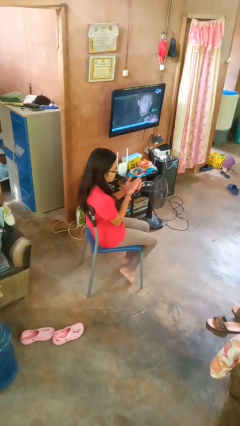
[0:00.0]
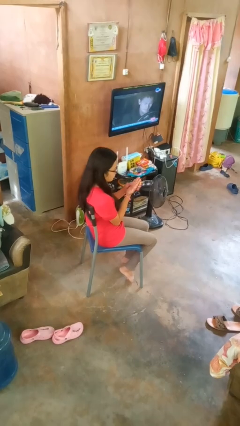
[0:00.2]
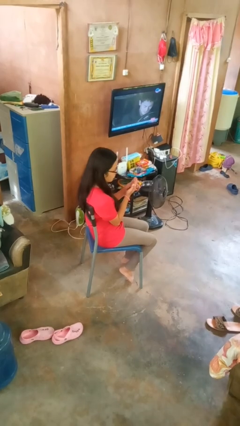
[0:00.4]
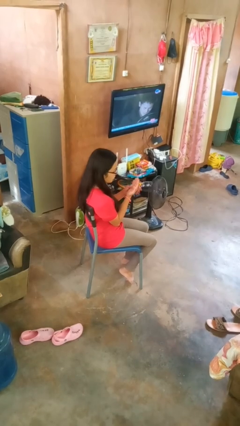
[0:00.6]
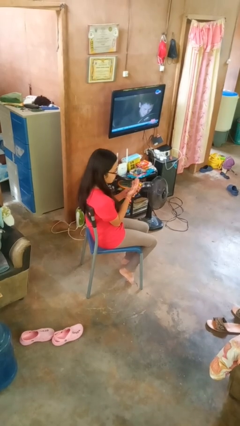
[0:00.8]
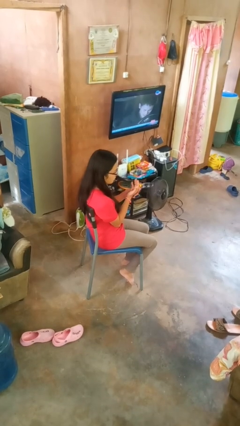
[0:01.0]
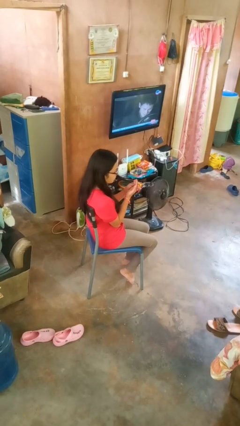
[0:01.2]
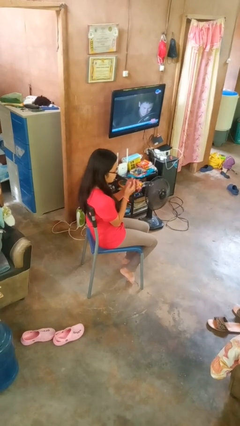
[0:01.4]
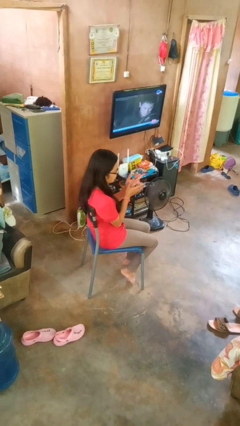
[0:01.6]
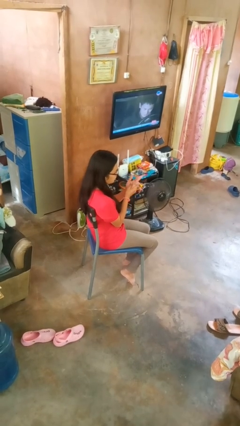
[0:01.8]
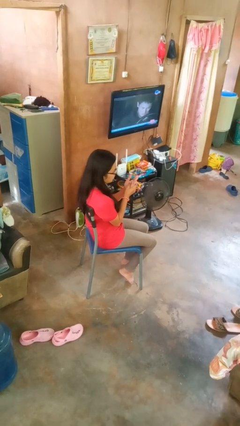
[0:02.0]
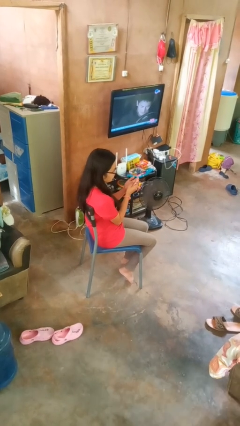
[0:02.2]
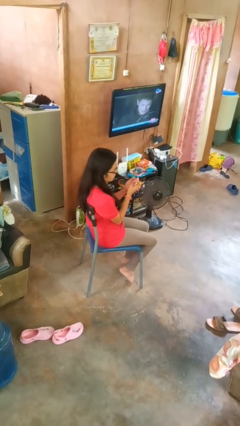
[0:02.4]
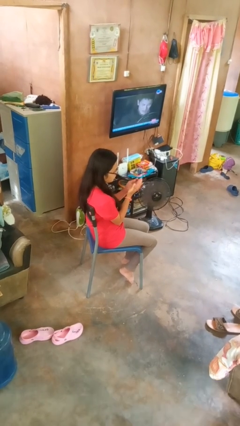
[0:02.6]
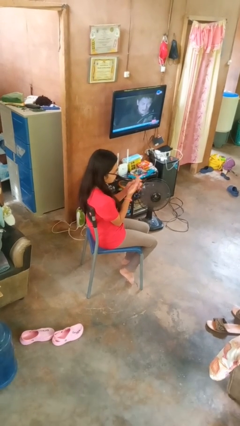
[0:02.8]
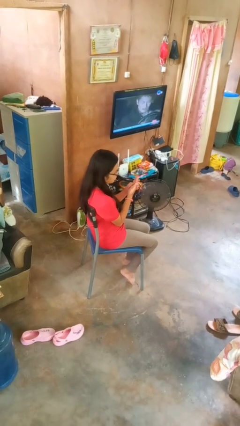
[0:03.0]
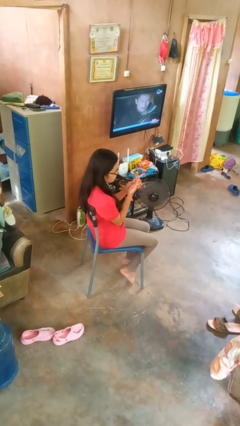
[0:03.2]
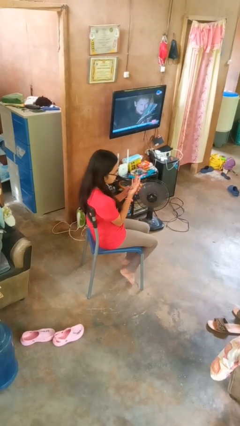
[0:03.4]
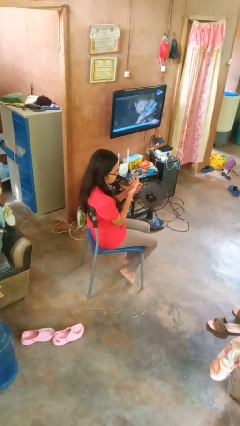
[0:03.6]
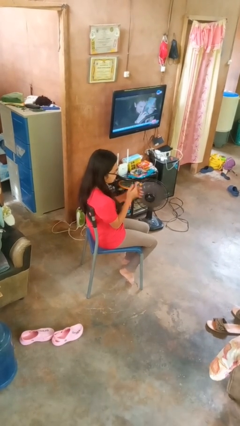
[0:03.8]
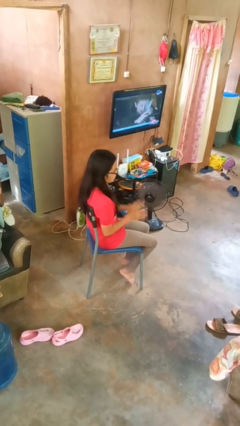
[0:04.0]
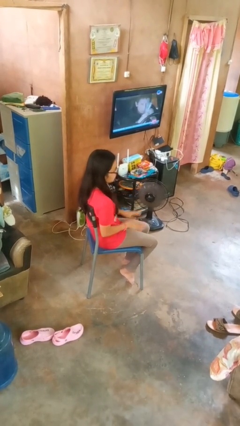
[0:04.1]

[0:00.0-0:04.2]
person looks at hands in lap

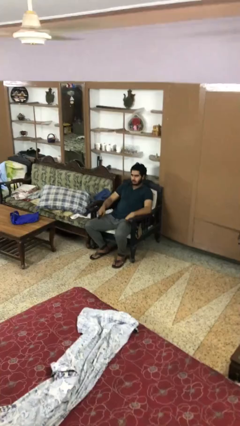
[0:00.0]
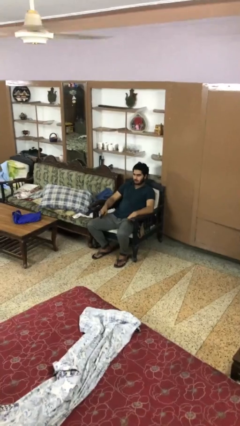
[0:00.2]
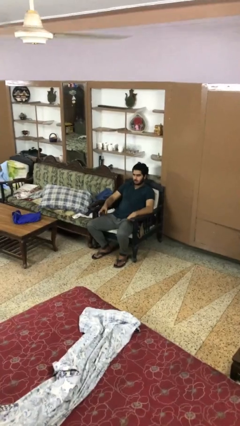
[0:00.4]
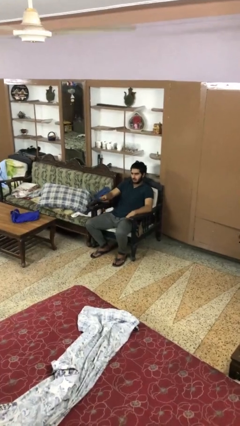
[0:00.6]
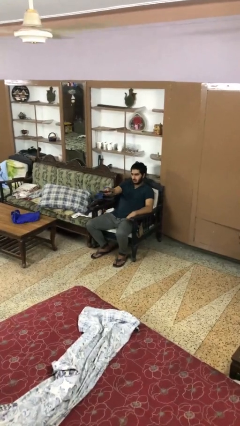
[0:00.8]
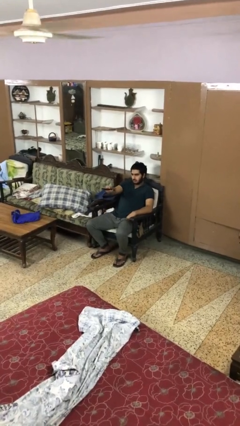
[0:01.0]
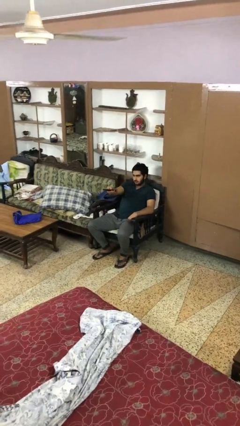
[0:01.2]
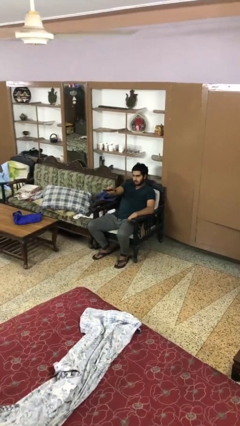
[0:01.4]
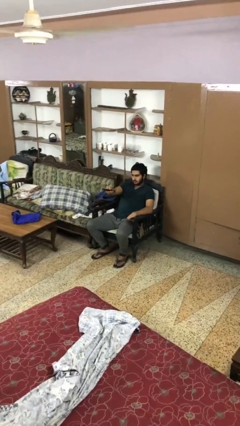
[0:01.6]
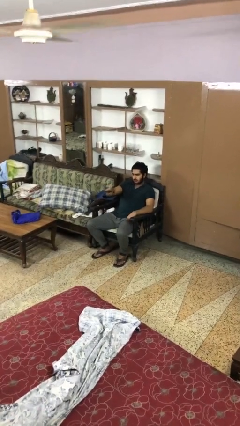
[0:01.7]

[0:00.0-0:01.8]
person uses television remote

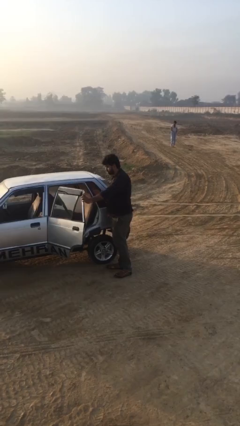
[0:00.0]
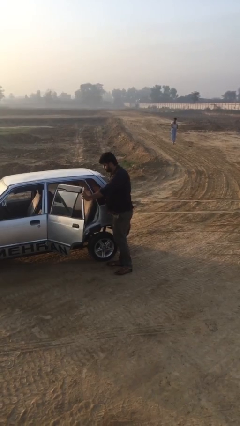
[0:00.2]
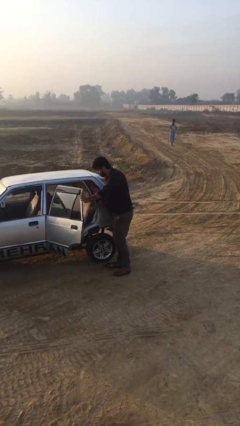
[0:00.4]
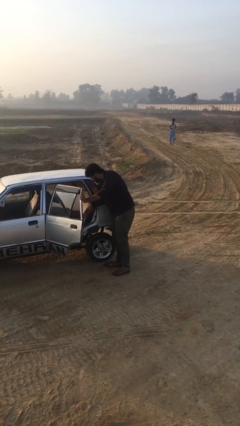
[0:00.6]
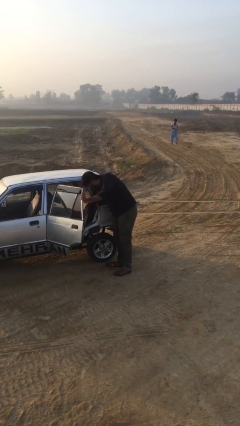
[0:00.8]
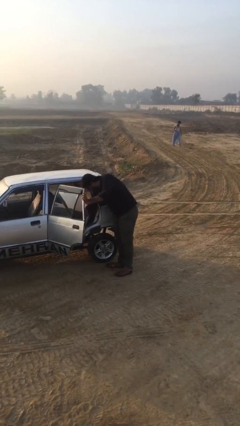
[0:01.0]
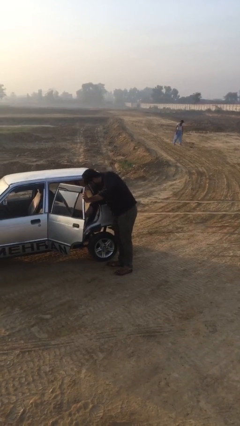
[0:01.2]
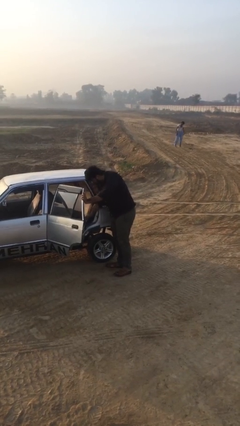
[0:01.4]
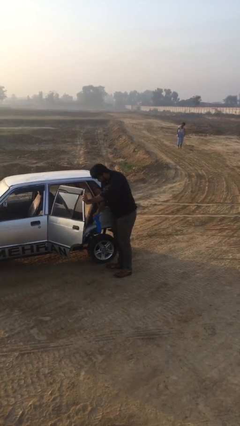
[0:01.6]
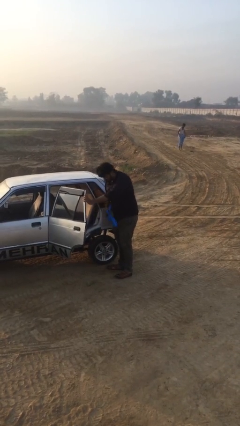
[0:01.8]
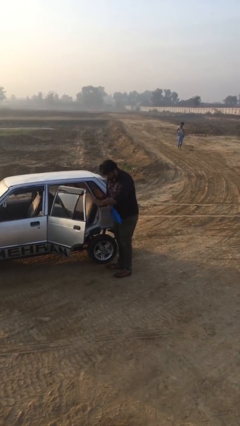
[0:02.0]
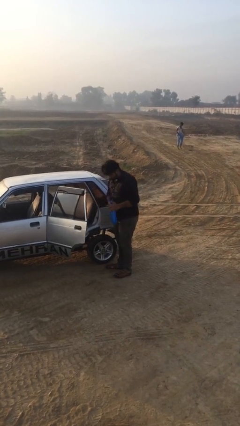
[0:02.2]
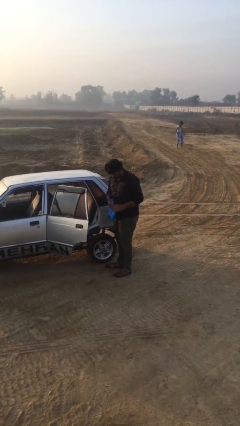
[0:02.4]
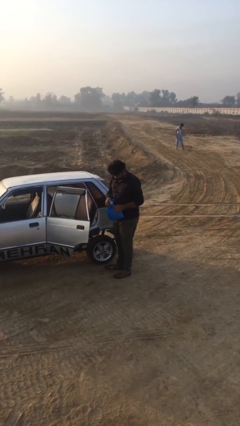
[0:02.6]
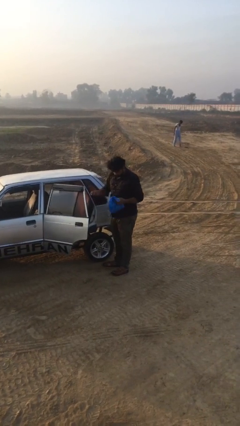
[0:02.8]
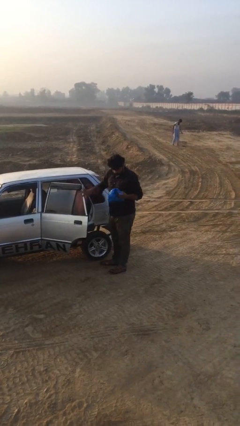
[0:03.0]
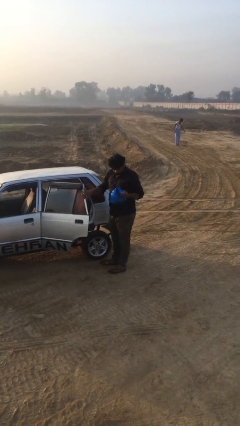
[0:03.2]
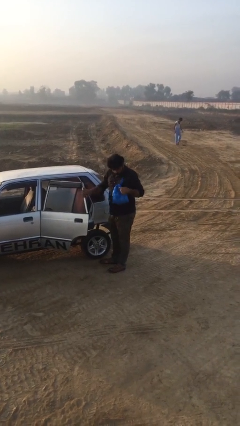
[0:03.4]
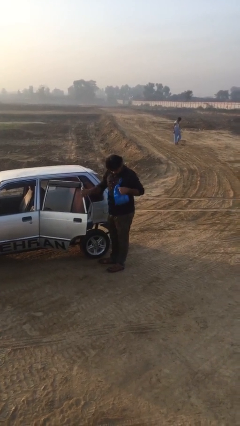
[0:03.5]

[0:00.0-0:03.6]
person unloads car

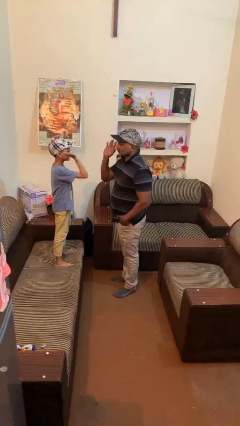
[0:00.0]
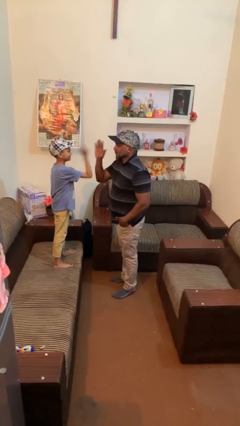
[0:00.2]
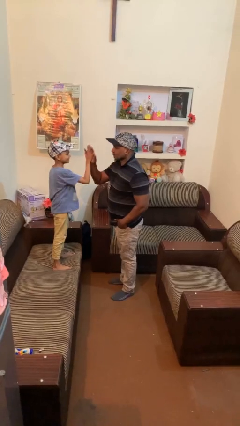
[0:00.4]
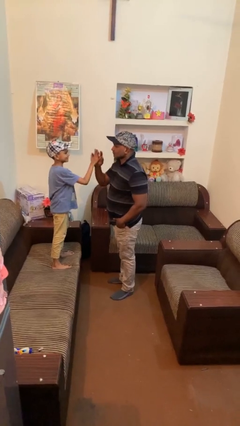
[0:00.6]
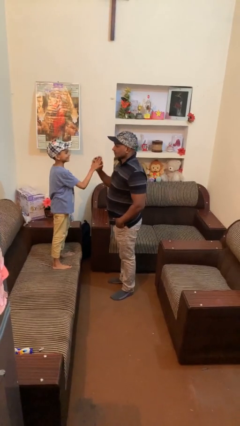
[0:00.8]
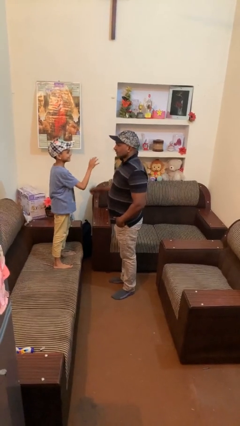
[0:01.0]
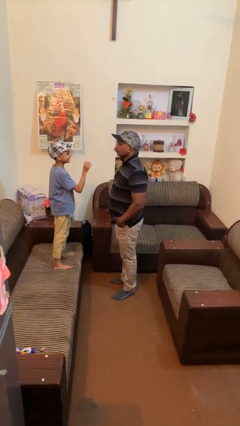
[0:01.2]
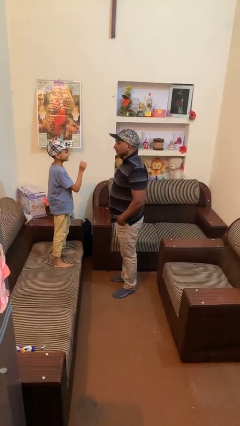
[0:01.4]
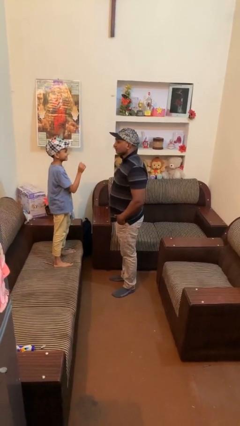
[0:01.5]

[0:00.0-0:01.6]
person highfives hand

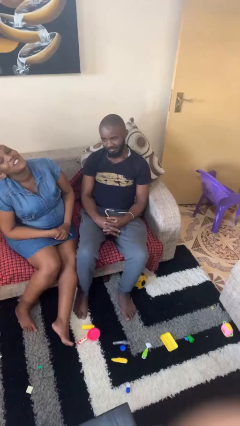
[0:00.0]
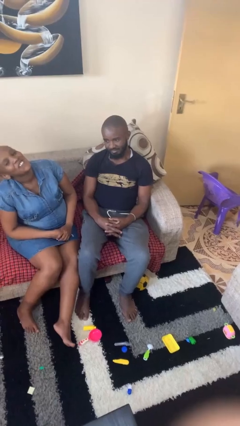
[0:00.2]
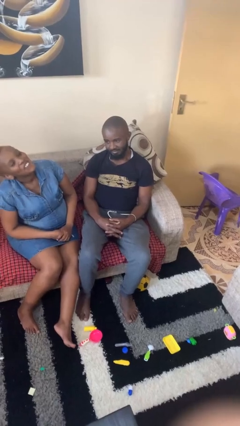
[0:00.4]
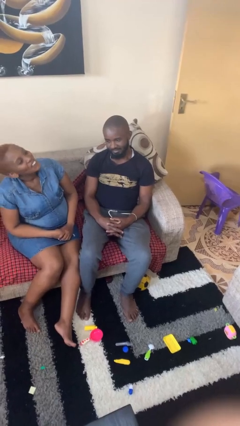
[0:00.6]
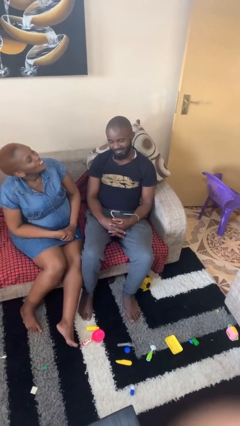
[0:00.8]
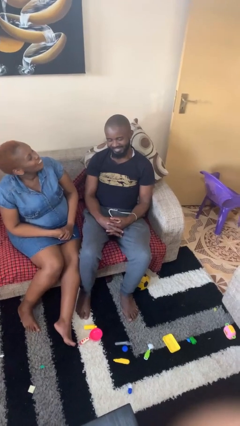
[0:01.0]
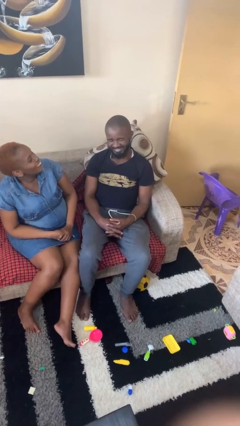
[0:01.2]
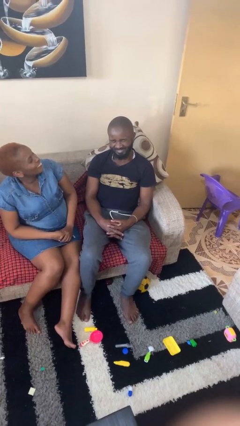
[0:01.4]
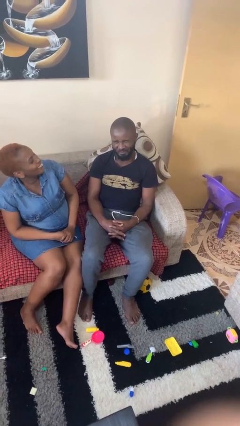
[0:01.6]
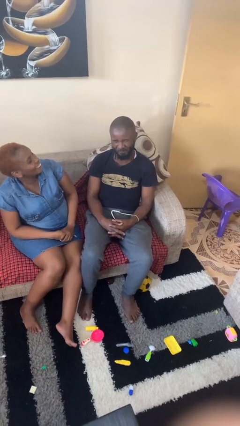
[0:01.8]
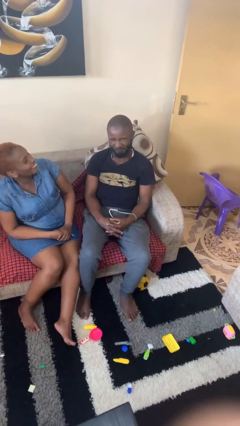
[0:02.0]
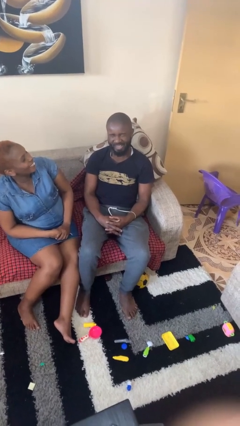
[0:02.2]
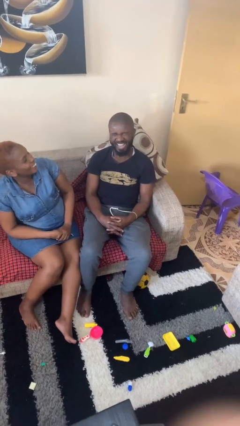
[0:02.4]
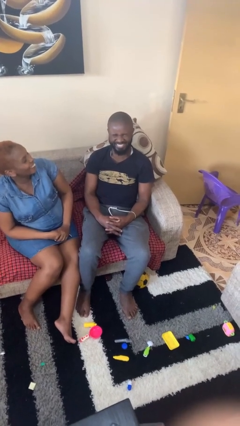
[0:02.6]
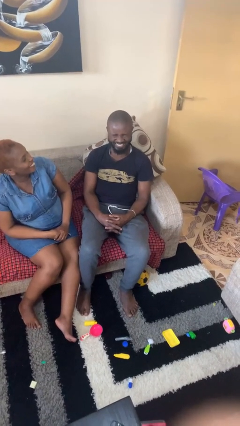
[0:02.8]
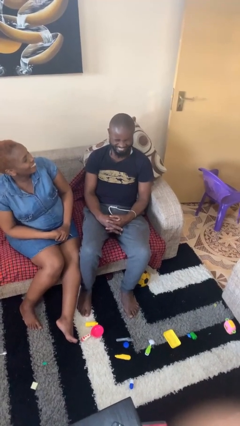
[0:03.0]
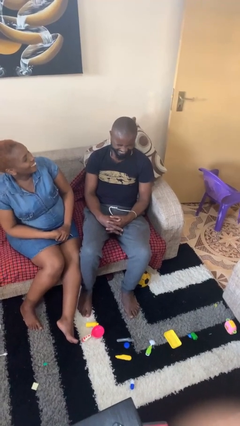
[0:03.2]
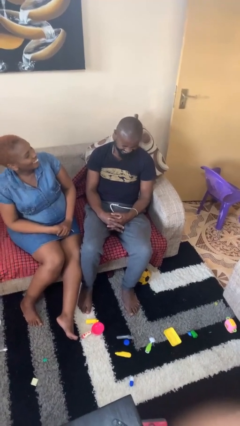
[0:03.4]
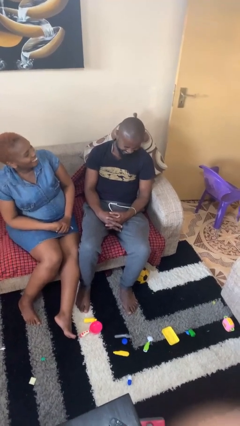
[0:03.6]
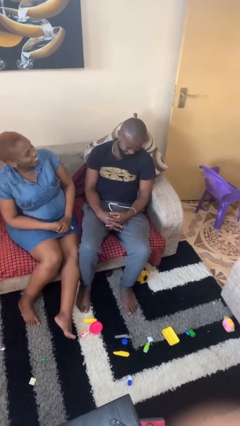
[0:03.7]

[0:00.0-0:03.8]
person laughs with person

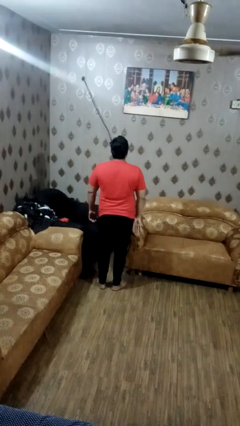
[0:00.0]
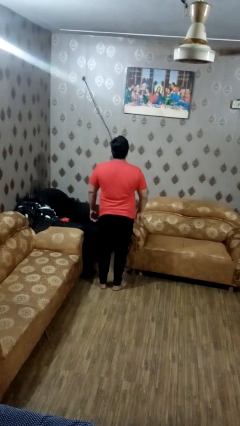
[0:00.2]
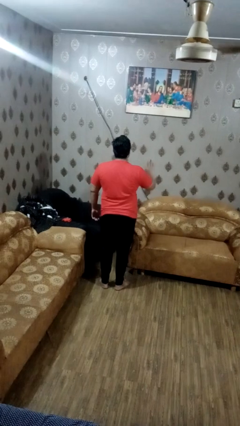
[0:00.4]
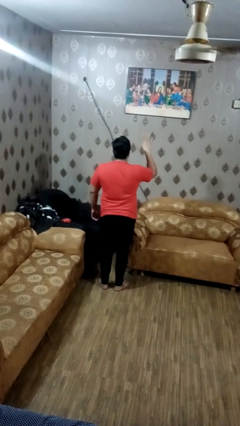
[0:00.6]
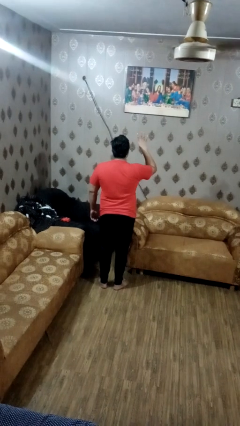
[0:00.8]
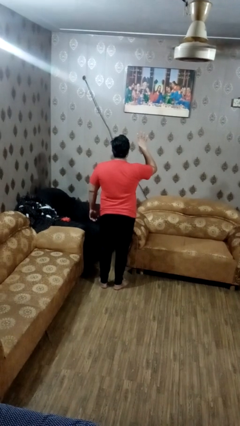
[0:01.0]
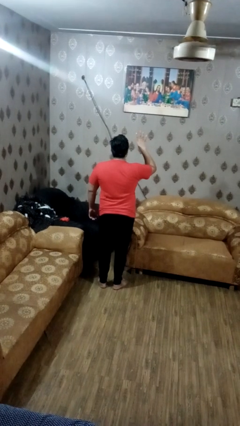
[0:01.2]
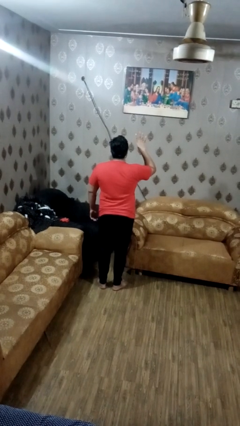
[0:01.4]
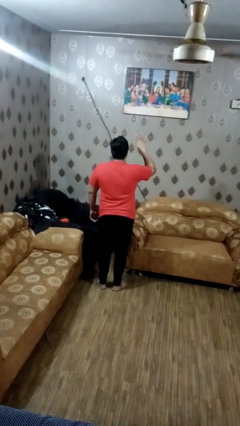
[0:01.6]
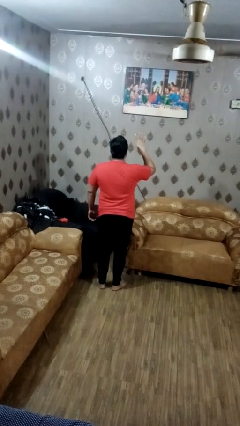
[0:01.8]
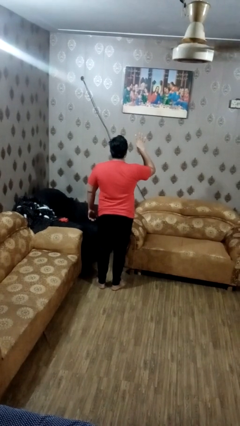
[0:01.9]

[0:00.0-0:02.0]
person gestures number four

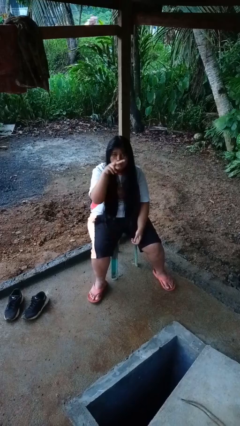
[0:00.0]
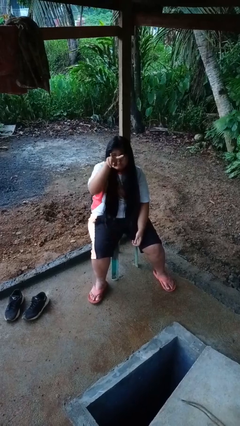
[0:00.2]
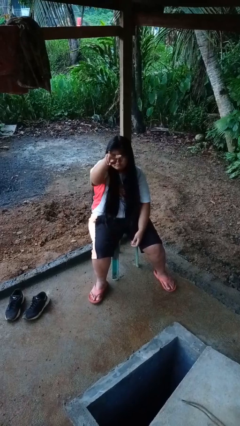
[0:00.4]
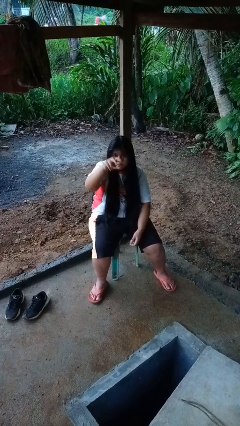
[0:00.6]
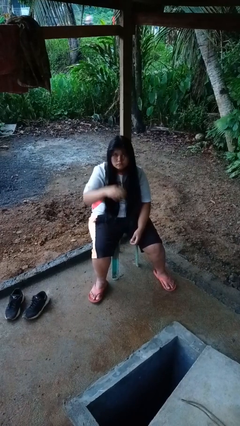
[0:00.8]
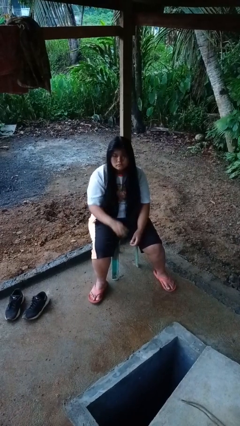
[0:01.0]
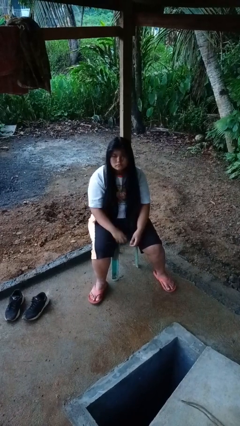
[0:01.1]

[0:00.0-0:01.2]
person gestures watch closely
